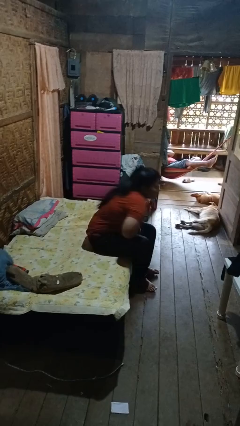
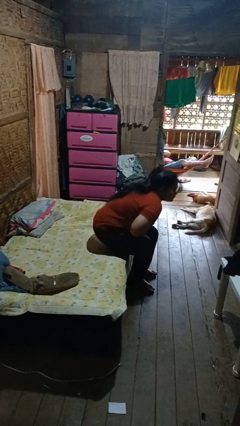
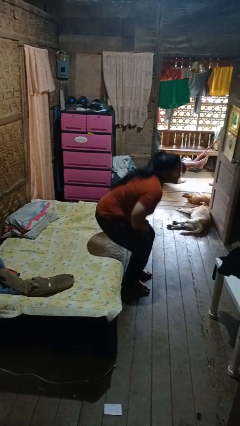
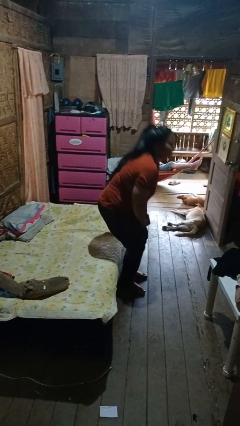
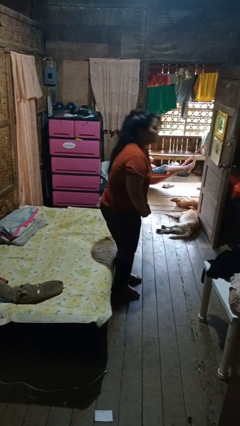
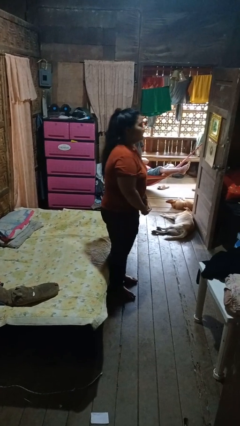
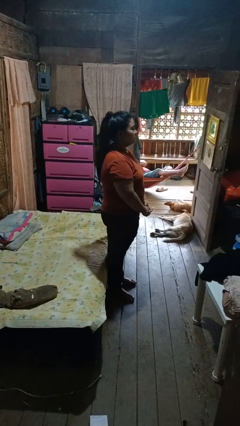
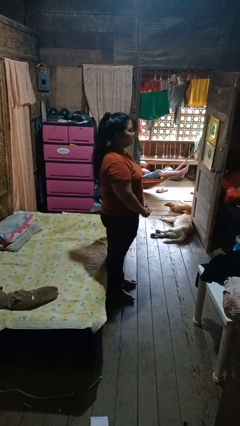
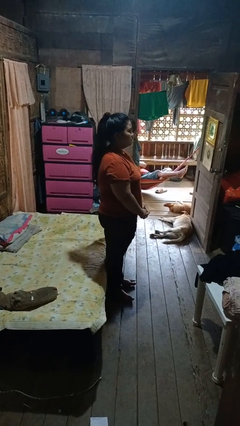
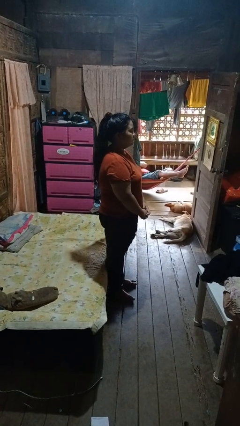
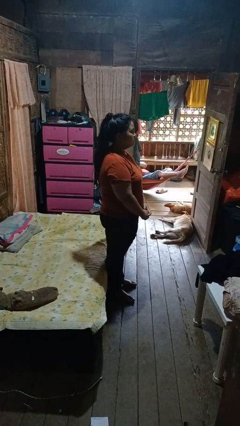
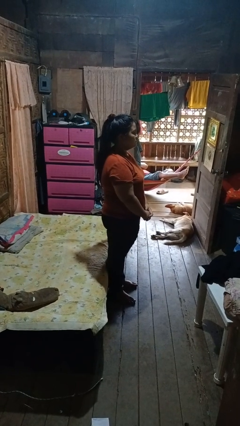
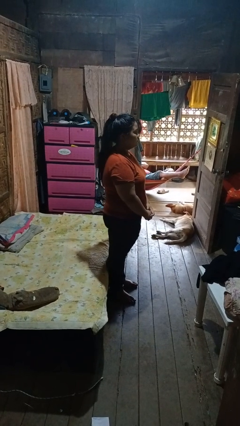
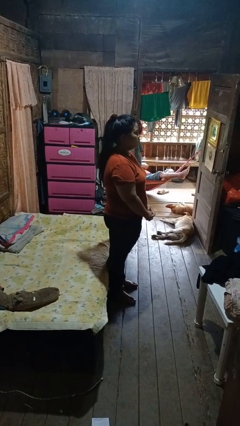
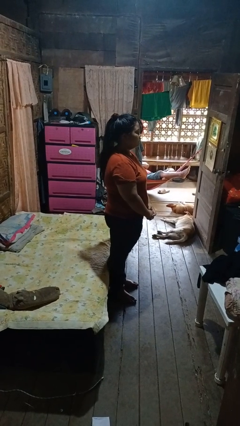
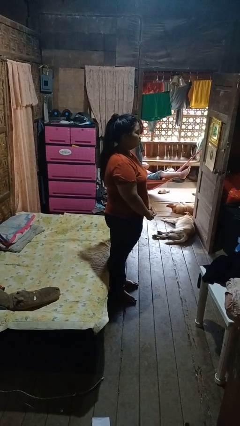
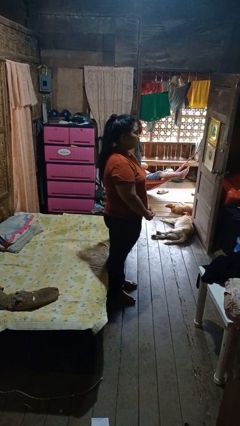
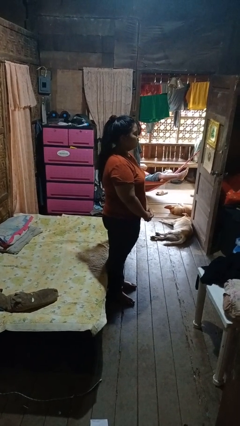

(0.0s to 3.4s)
person stands up

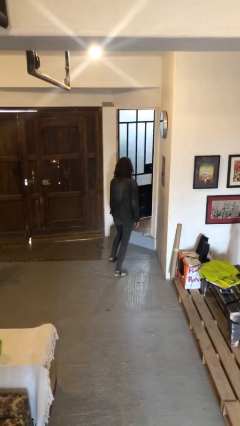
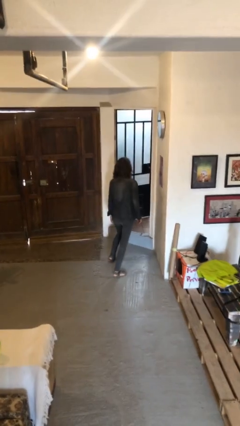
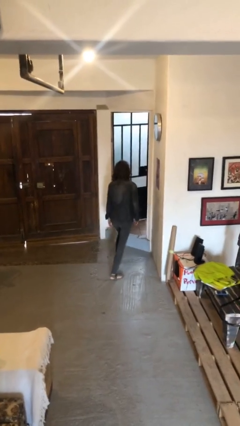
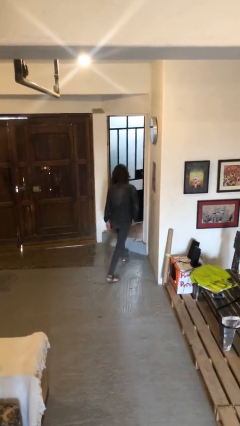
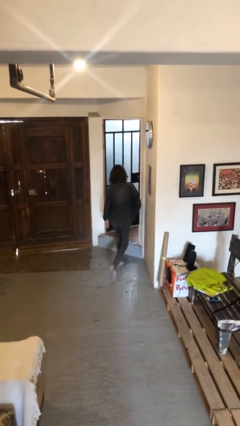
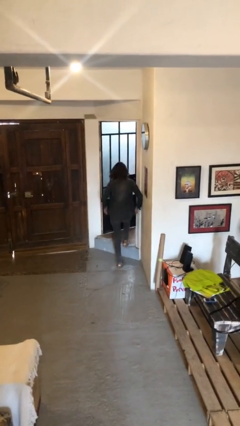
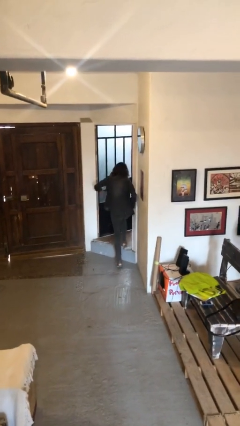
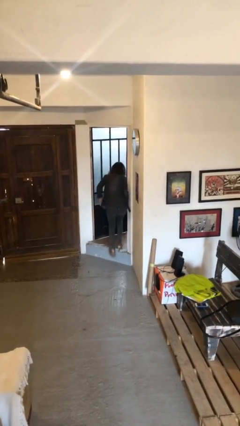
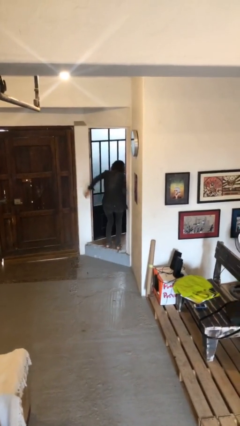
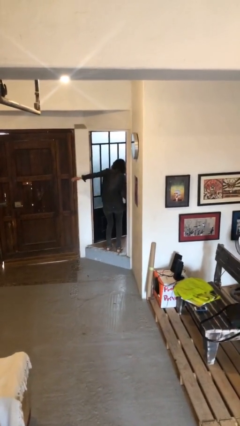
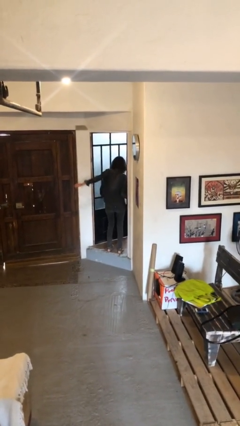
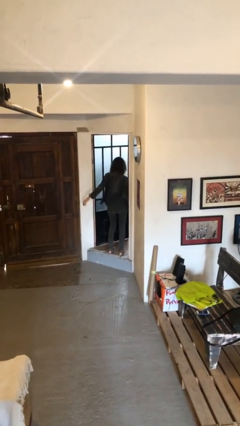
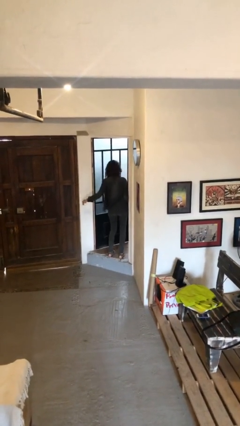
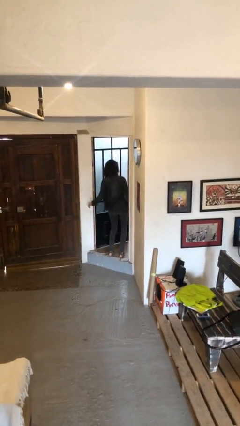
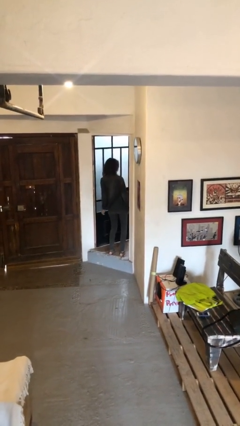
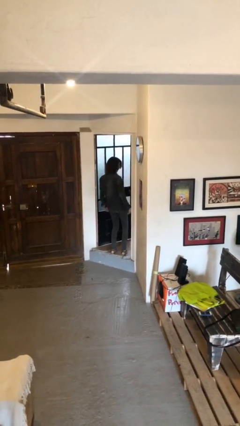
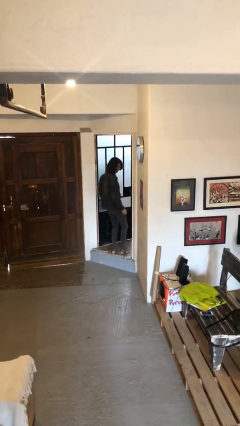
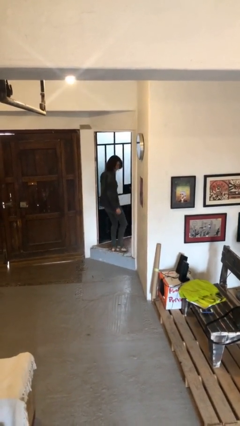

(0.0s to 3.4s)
person bumps into wall

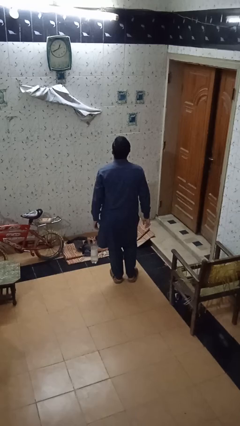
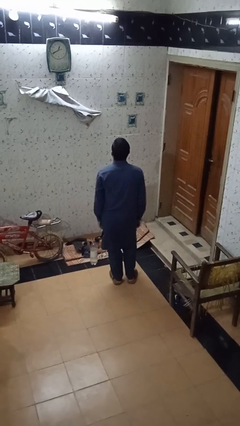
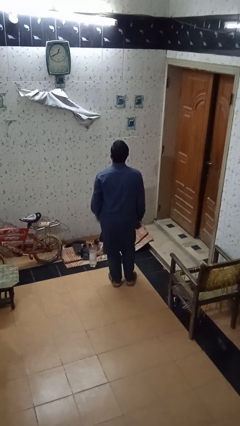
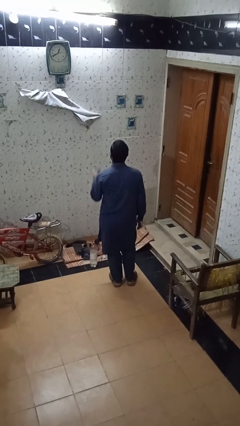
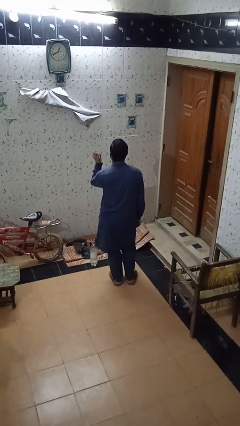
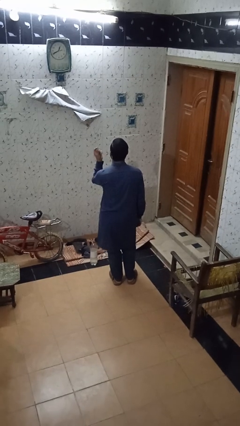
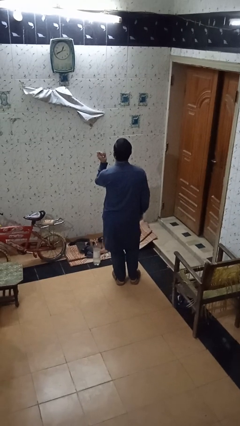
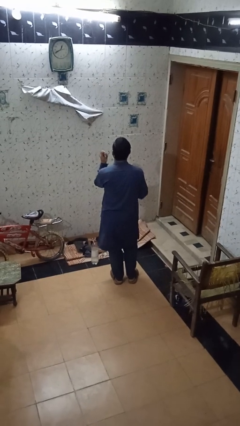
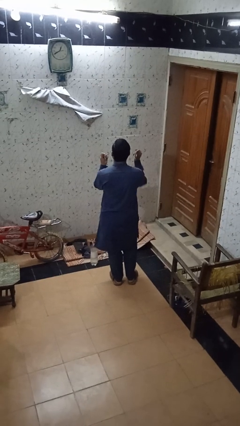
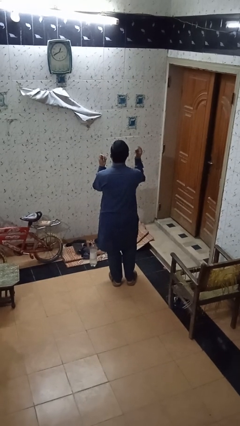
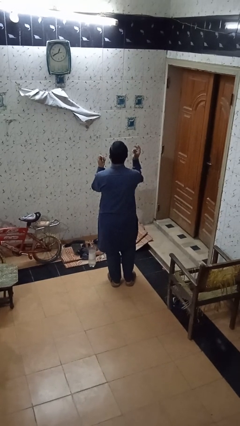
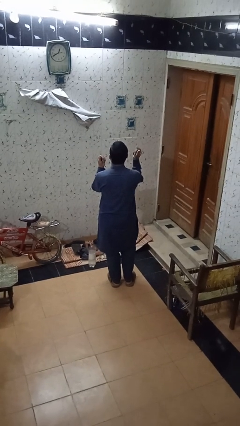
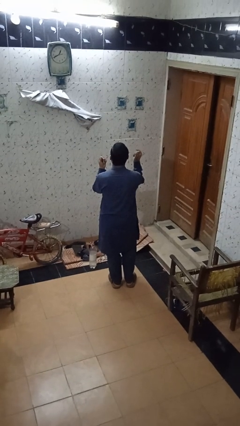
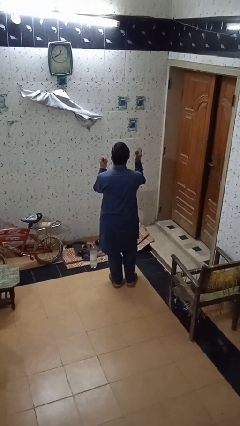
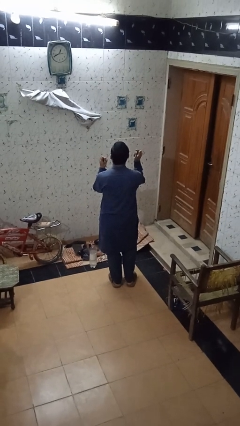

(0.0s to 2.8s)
person snaps fingers

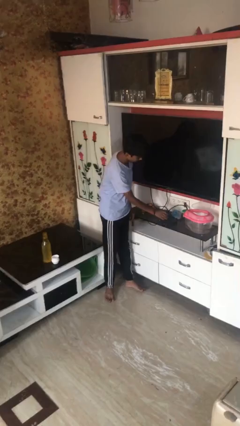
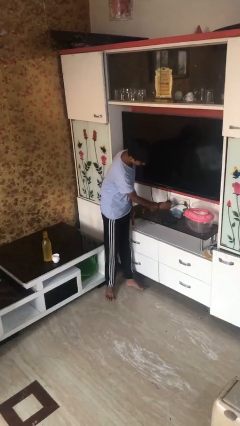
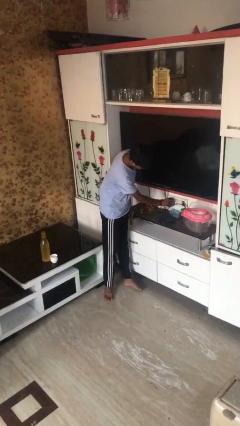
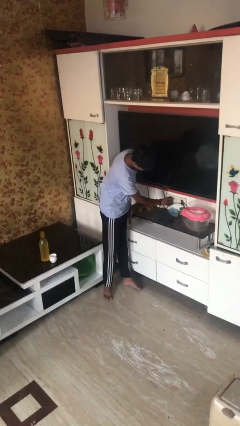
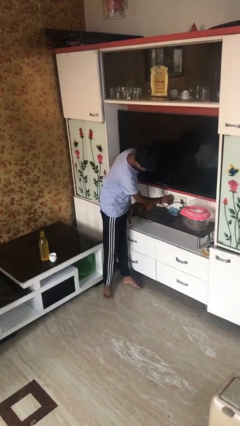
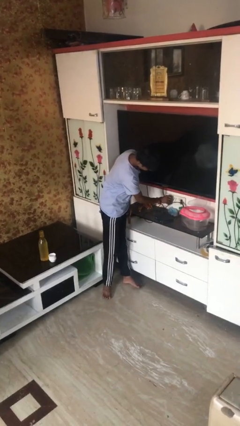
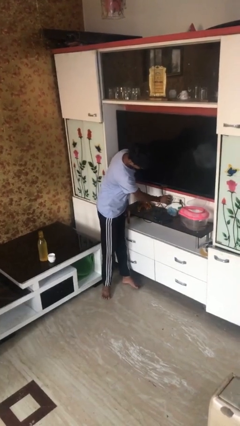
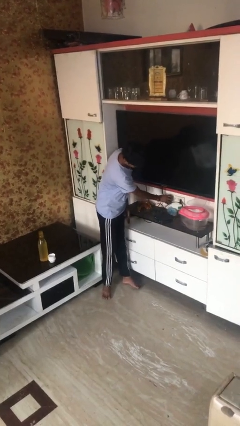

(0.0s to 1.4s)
person plugs into electrical socket

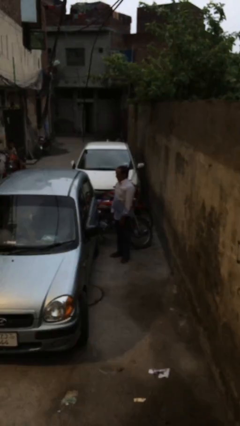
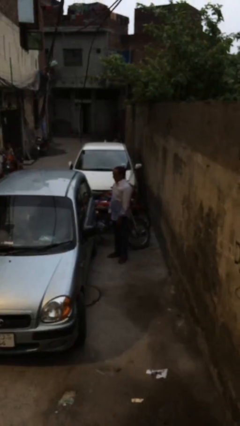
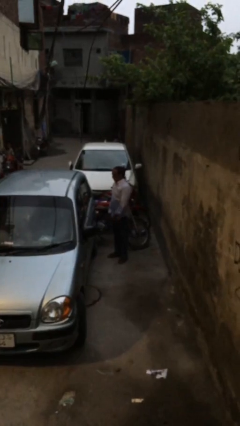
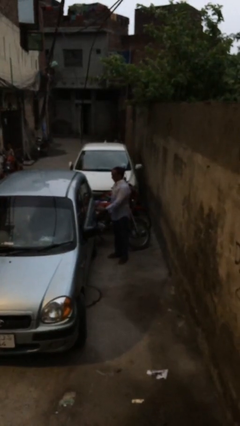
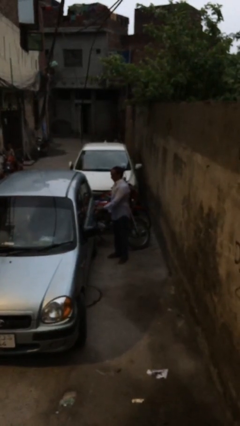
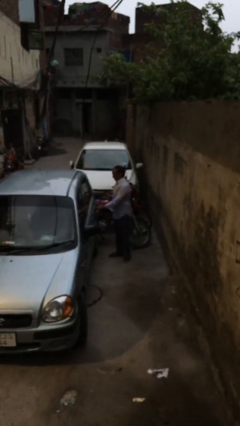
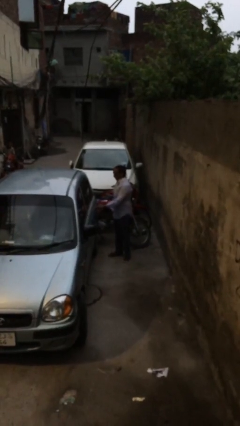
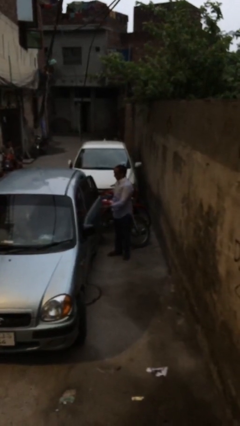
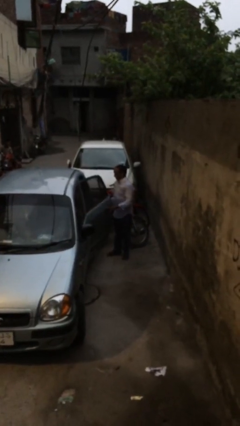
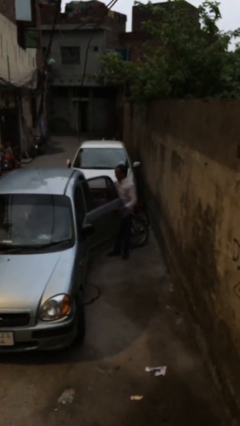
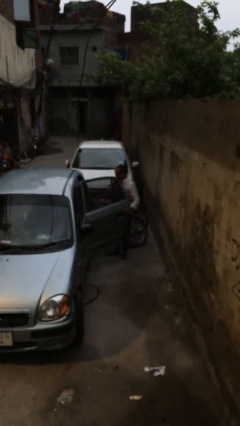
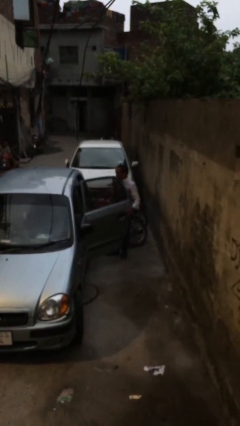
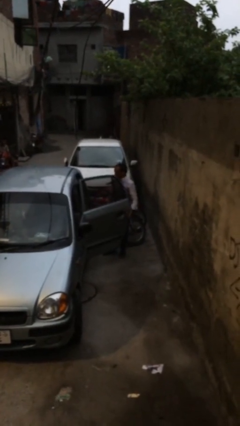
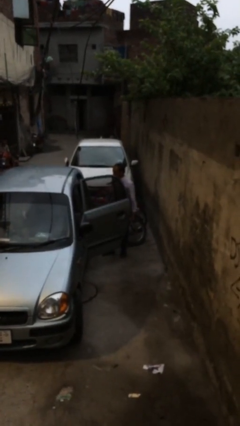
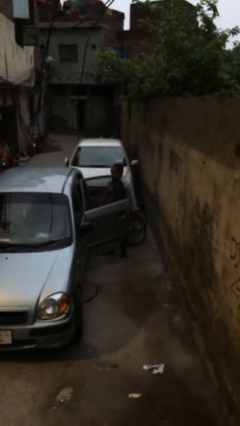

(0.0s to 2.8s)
person opens car door

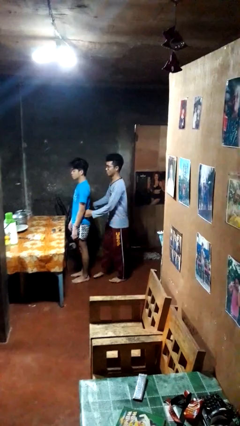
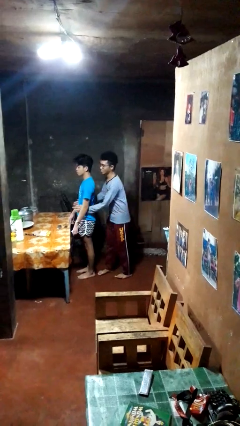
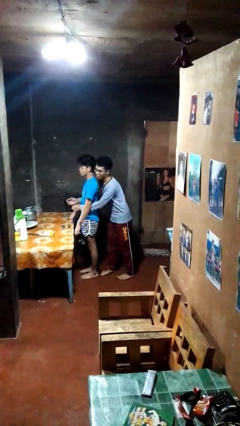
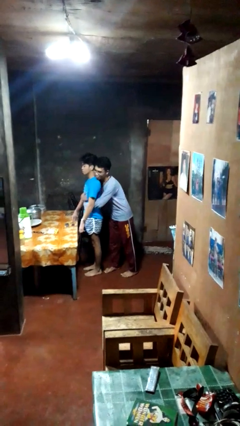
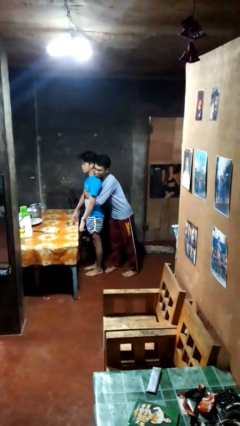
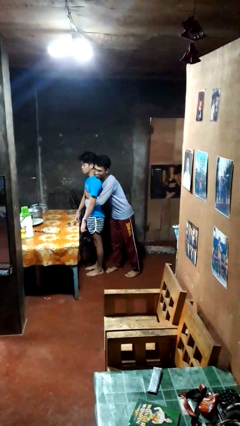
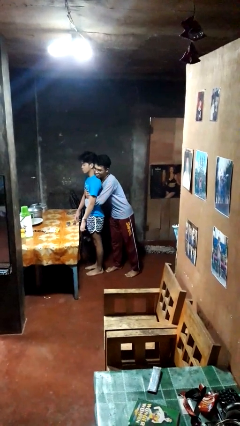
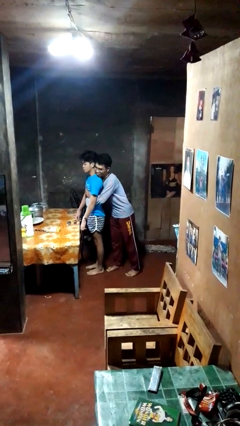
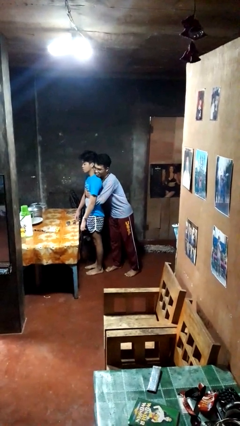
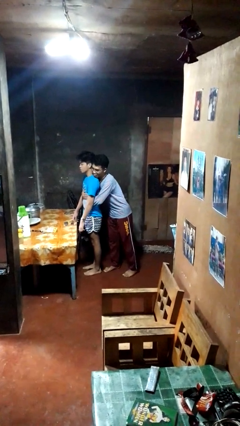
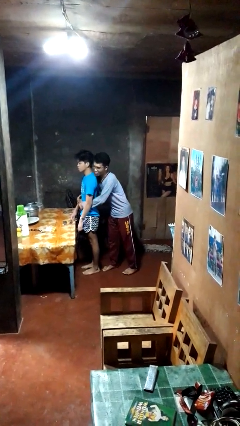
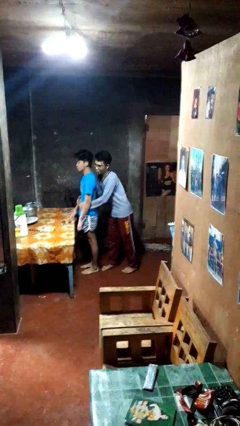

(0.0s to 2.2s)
person hugs person from behind

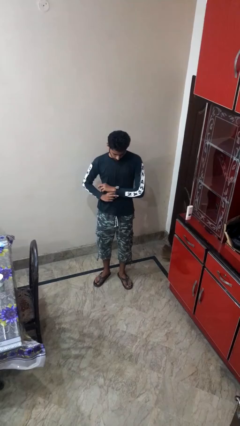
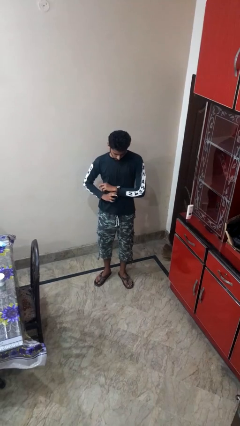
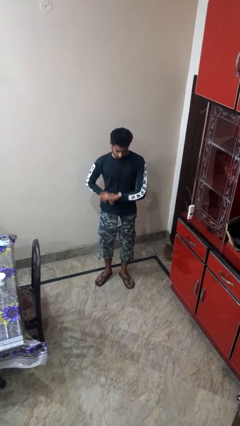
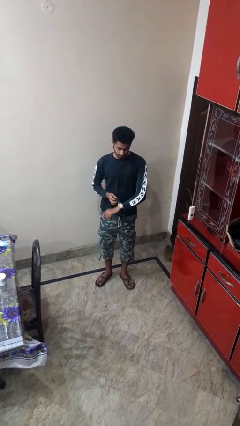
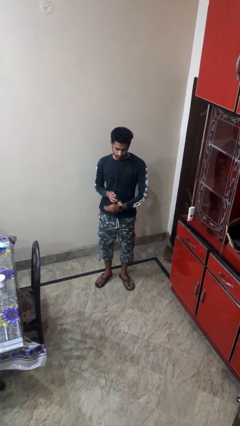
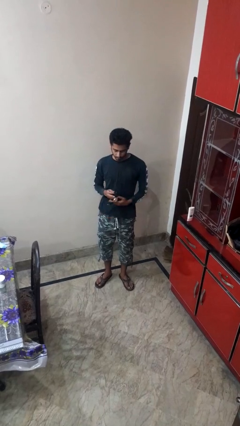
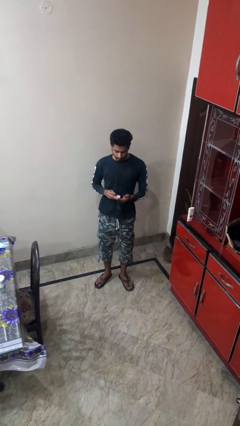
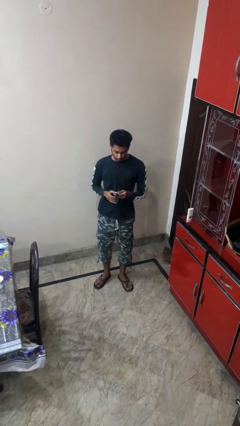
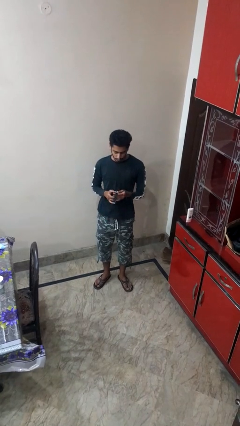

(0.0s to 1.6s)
person takes off wristwatch
